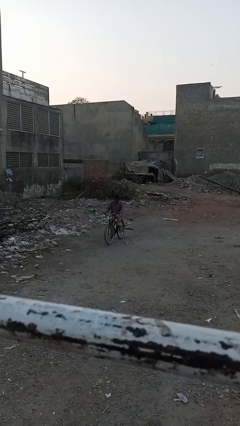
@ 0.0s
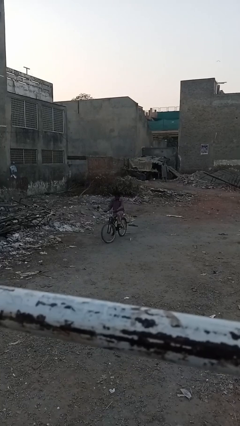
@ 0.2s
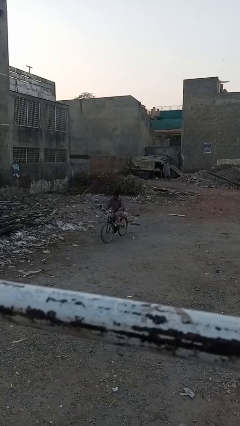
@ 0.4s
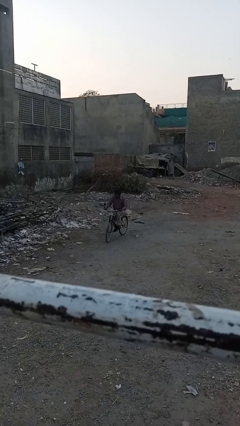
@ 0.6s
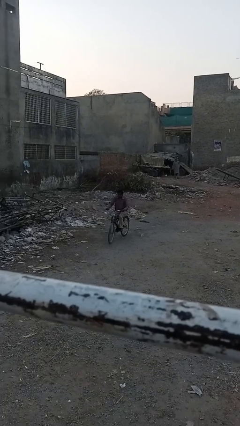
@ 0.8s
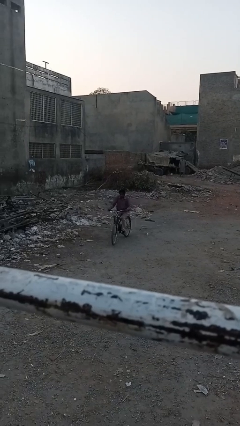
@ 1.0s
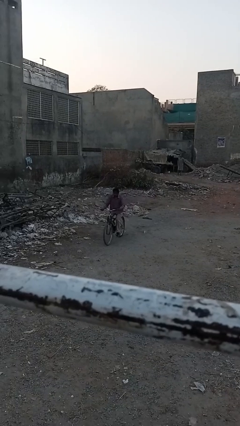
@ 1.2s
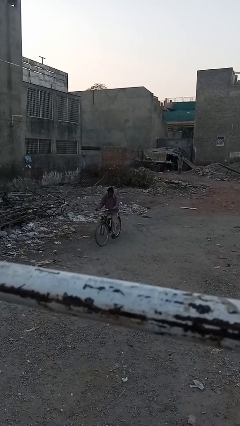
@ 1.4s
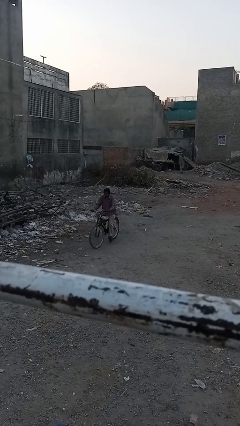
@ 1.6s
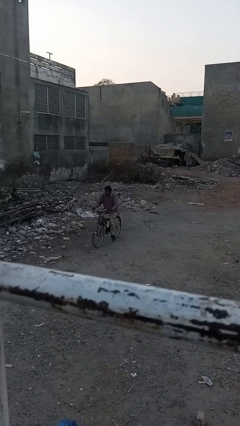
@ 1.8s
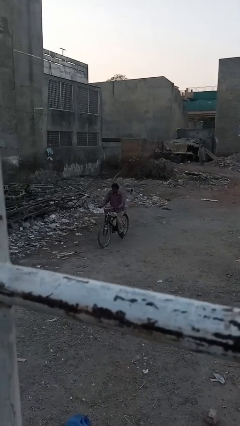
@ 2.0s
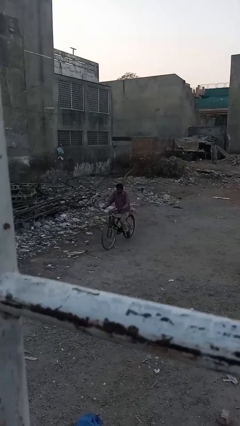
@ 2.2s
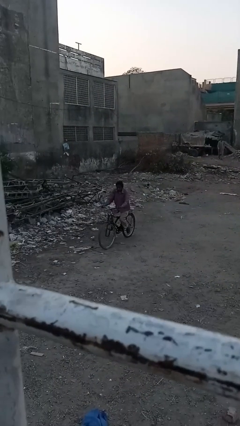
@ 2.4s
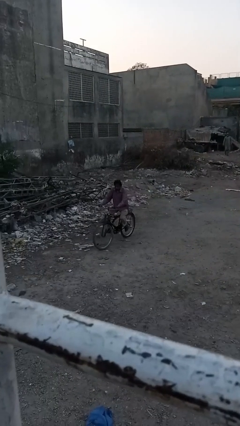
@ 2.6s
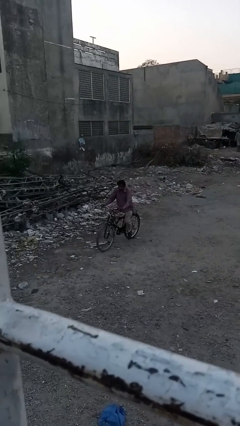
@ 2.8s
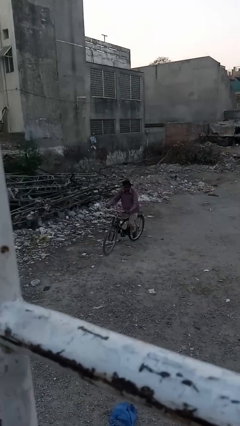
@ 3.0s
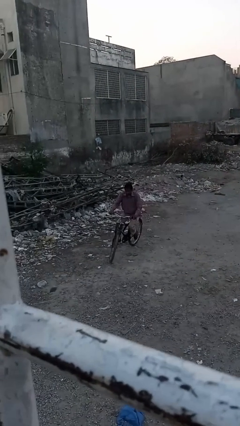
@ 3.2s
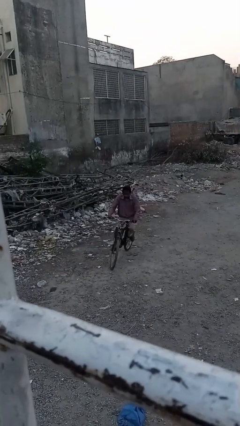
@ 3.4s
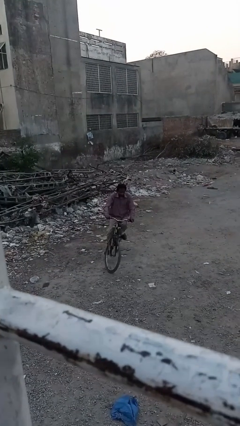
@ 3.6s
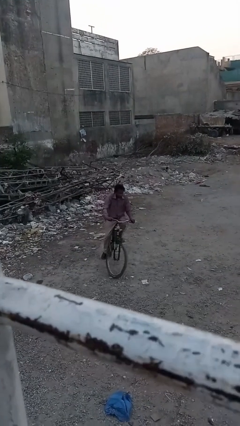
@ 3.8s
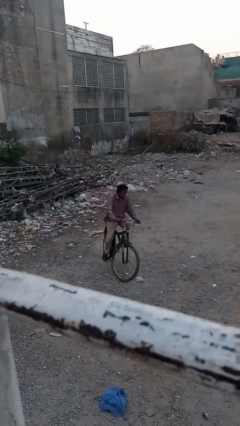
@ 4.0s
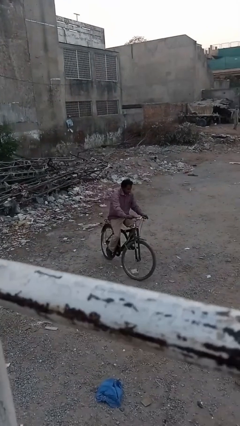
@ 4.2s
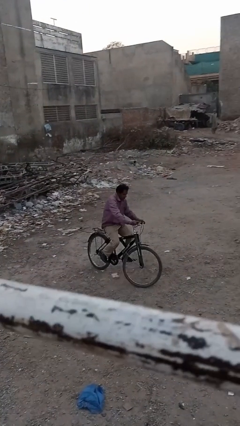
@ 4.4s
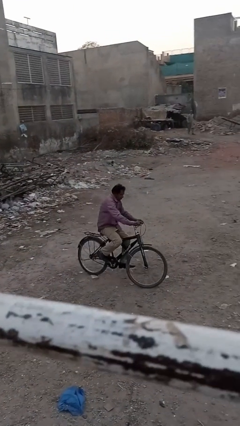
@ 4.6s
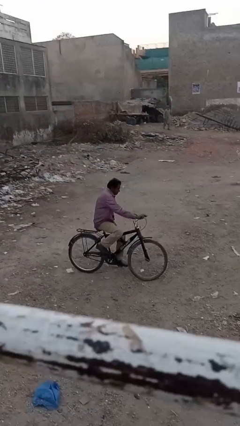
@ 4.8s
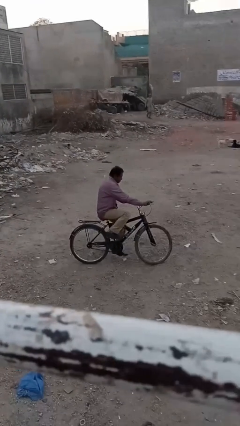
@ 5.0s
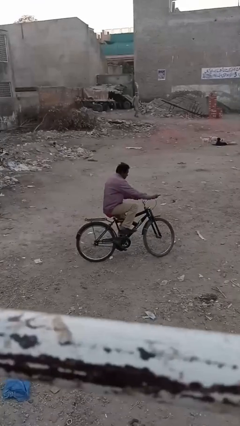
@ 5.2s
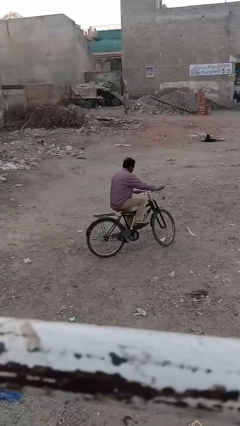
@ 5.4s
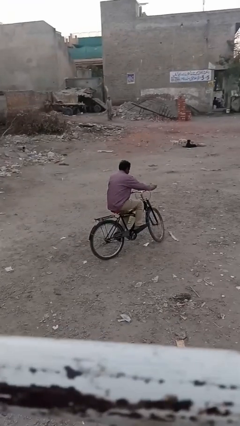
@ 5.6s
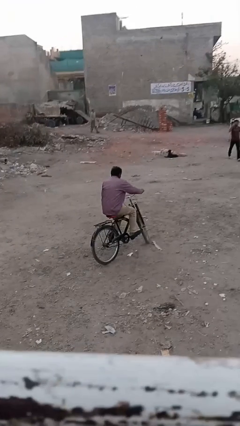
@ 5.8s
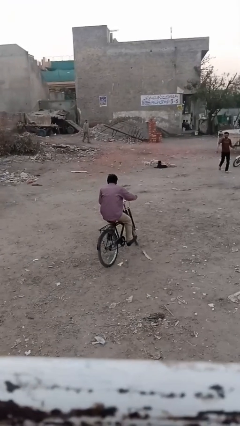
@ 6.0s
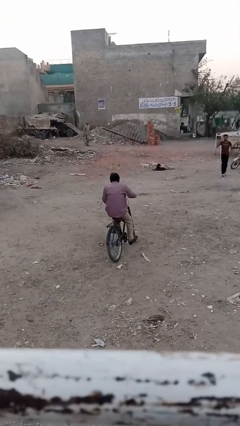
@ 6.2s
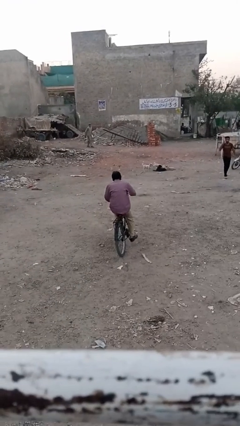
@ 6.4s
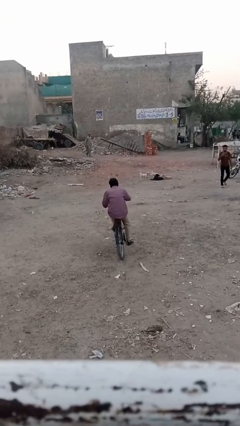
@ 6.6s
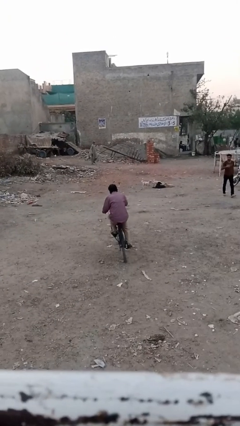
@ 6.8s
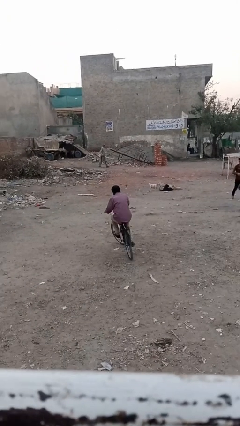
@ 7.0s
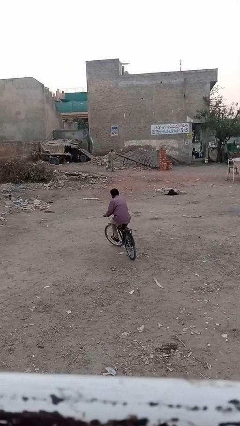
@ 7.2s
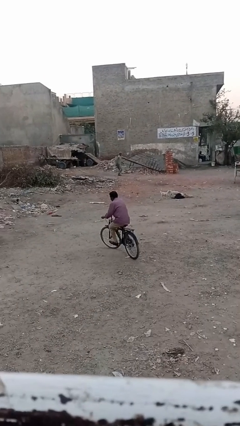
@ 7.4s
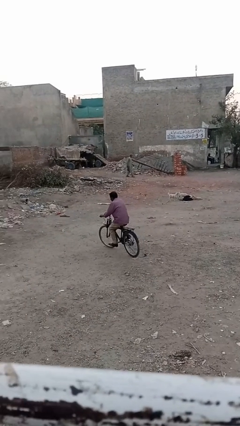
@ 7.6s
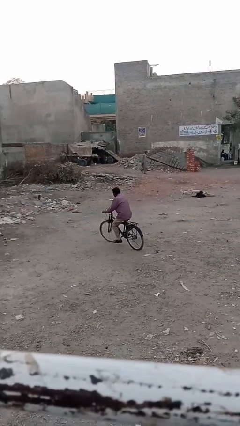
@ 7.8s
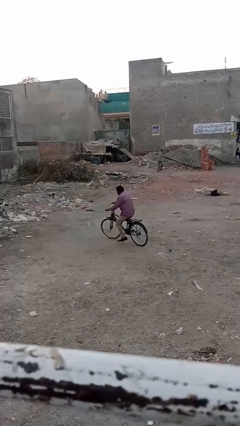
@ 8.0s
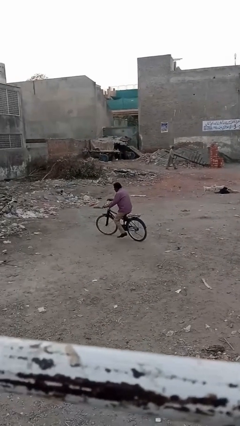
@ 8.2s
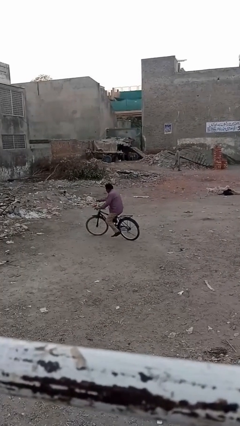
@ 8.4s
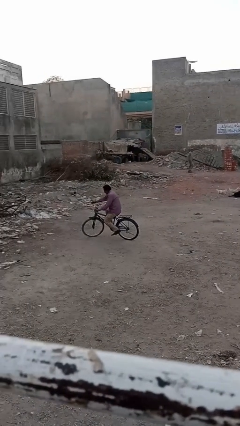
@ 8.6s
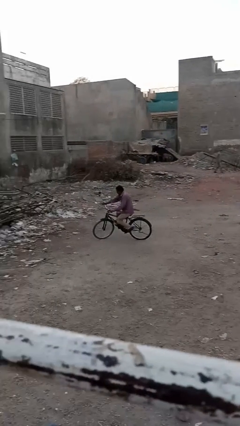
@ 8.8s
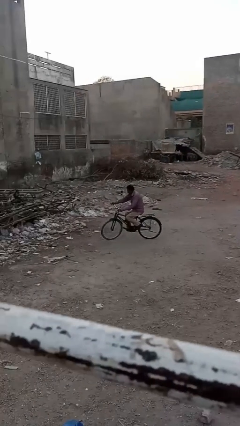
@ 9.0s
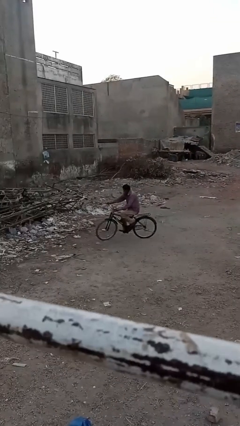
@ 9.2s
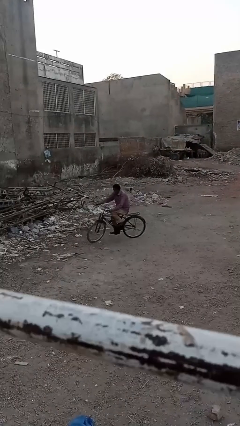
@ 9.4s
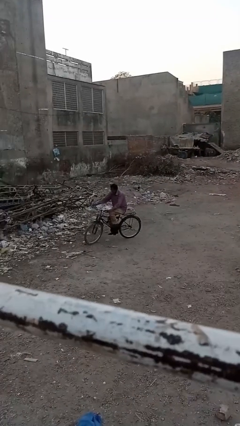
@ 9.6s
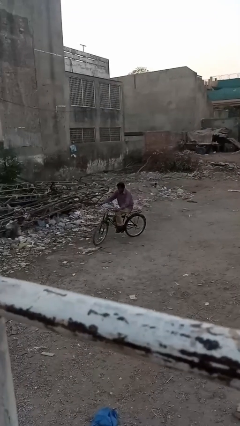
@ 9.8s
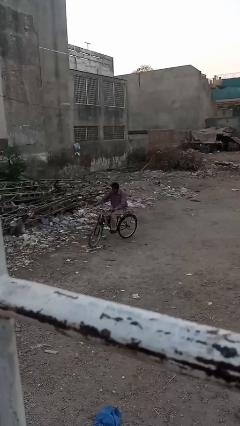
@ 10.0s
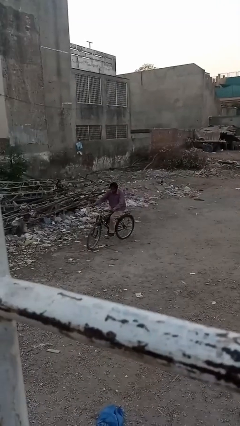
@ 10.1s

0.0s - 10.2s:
person rides bicycle

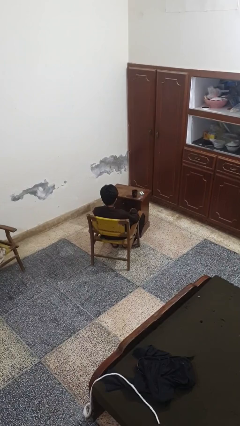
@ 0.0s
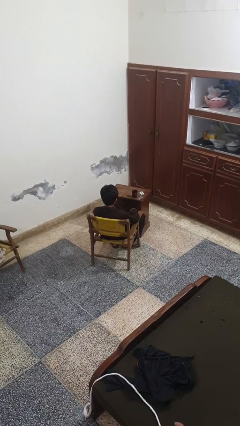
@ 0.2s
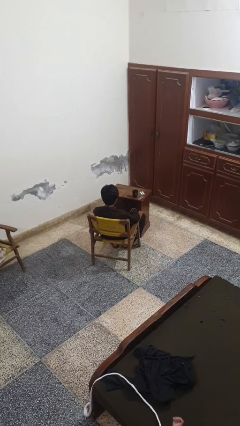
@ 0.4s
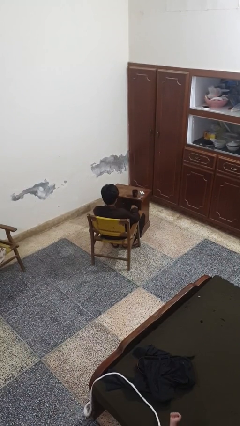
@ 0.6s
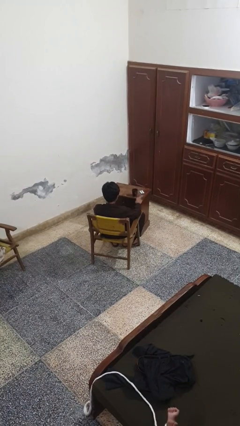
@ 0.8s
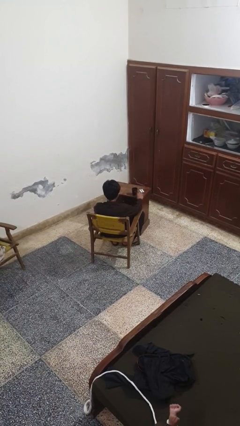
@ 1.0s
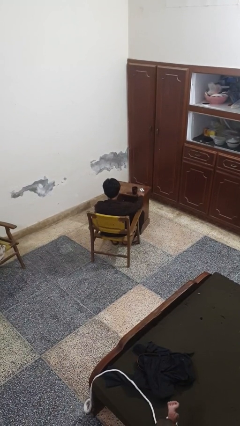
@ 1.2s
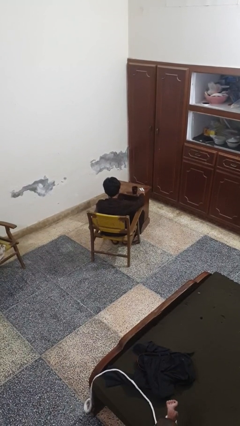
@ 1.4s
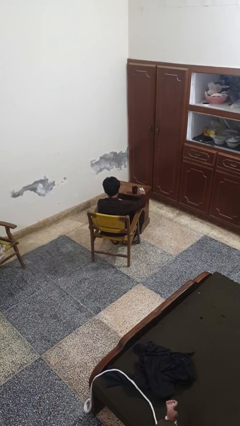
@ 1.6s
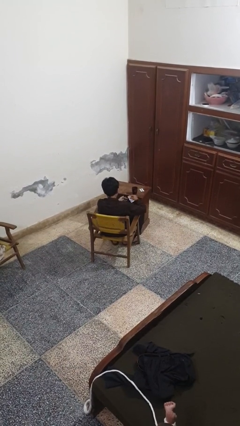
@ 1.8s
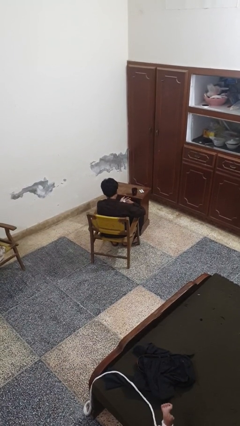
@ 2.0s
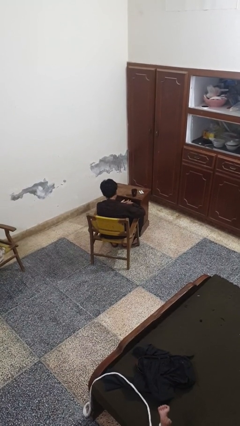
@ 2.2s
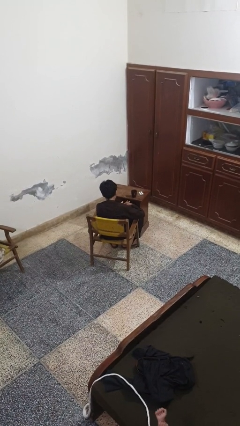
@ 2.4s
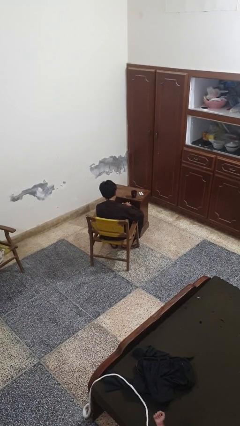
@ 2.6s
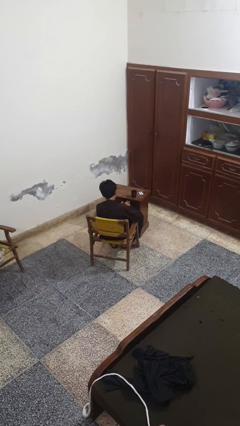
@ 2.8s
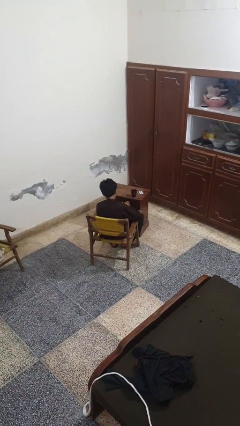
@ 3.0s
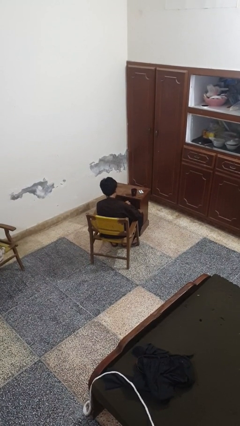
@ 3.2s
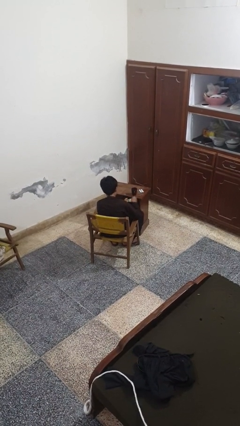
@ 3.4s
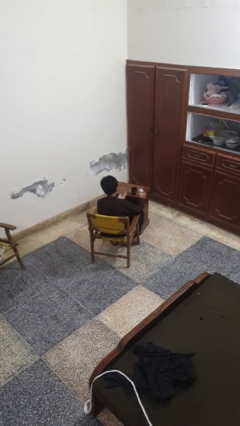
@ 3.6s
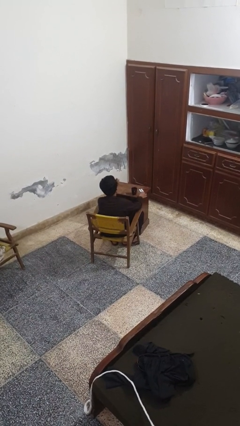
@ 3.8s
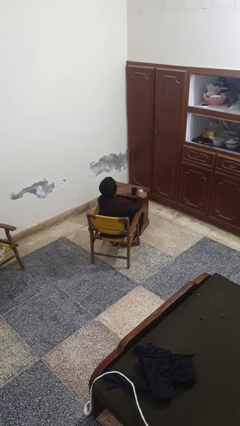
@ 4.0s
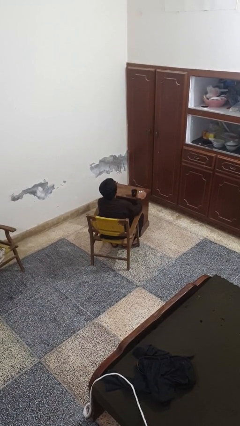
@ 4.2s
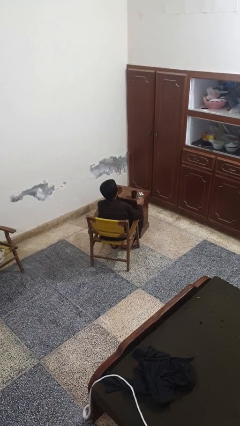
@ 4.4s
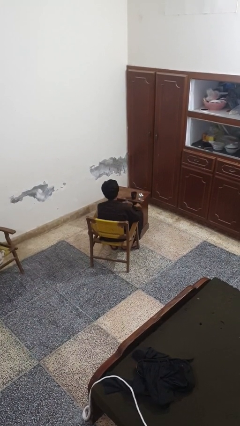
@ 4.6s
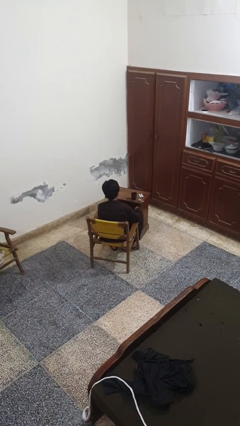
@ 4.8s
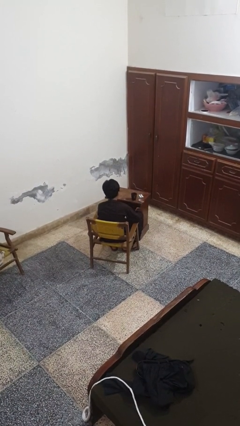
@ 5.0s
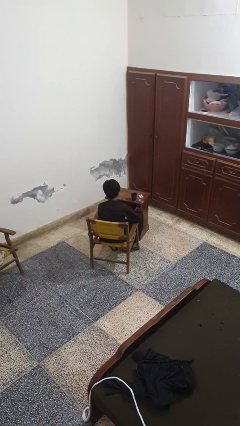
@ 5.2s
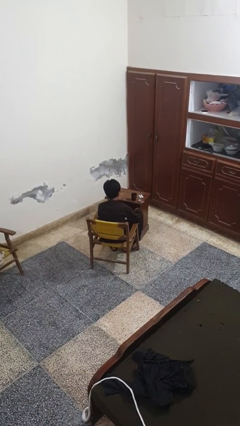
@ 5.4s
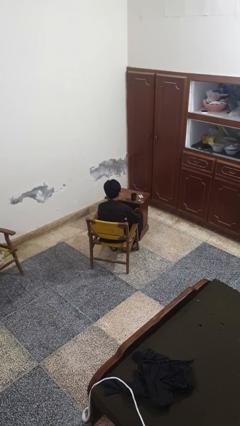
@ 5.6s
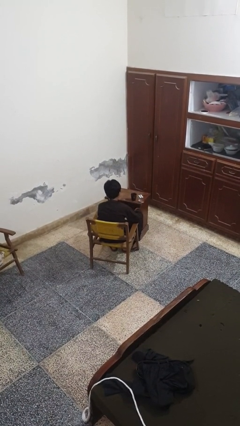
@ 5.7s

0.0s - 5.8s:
person takes medicine pills

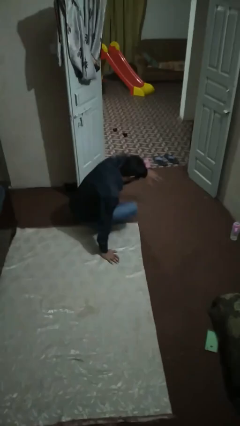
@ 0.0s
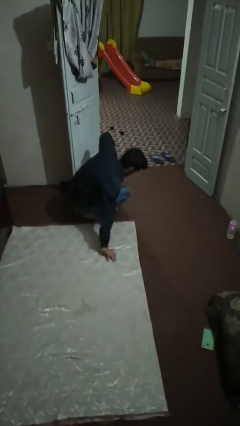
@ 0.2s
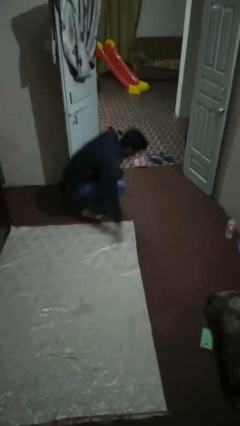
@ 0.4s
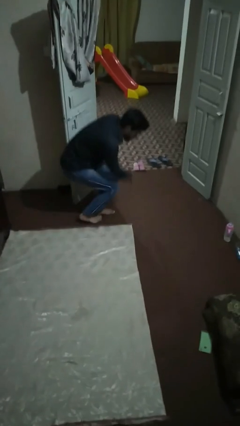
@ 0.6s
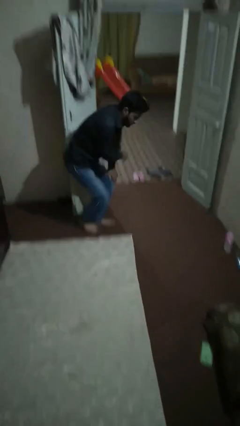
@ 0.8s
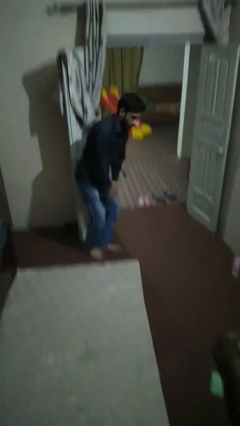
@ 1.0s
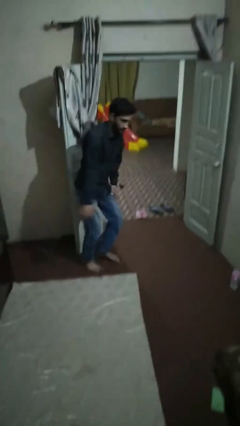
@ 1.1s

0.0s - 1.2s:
person stands up from floor

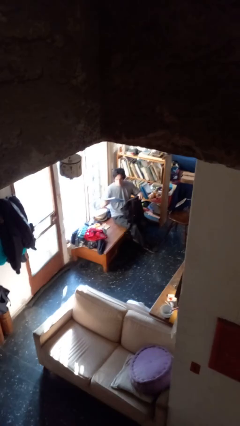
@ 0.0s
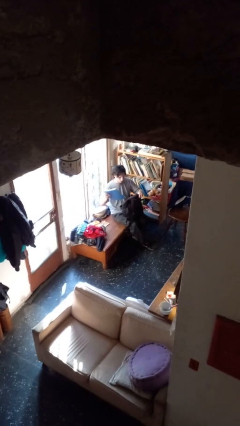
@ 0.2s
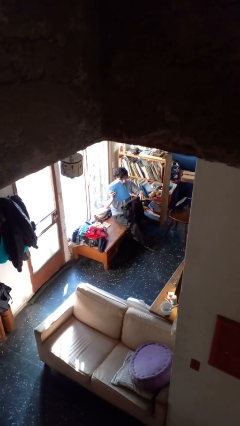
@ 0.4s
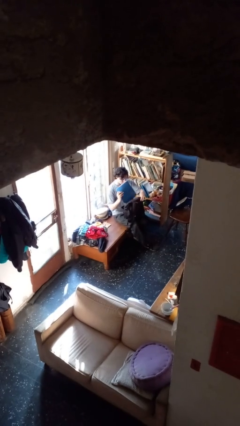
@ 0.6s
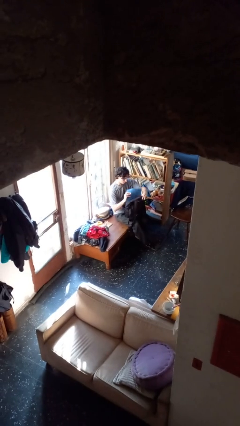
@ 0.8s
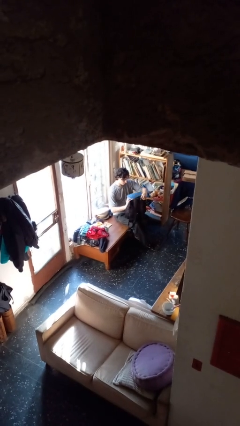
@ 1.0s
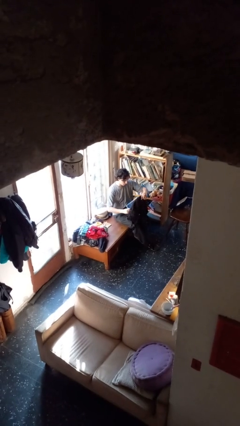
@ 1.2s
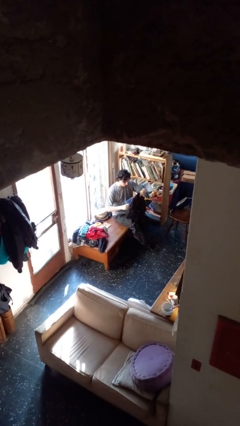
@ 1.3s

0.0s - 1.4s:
person puts object into backpack
